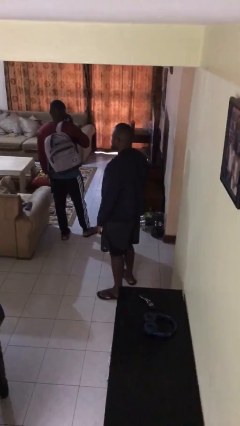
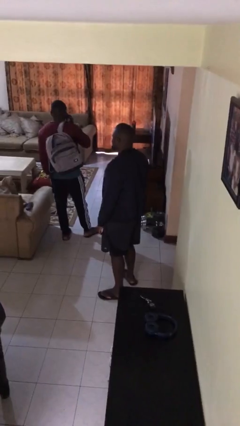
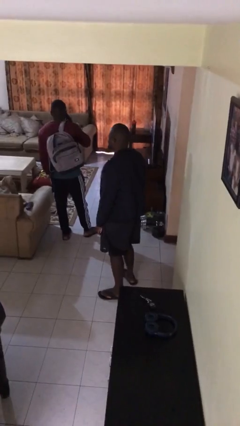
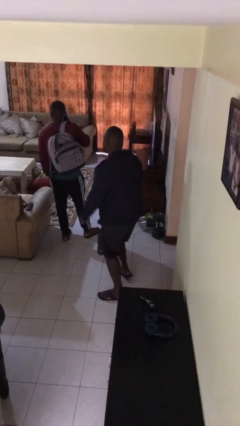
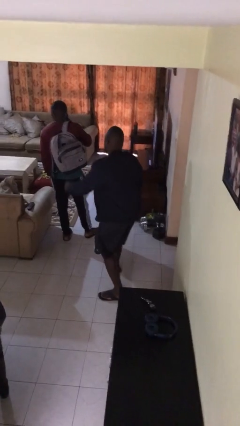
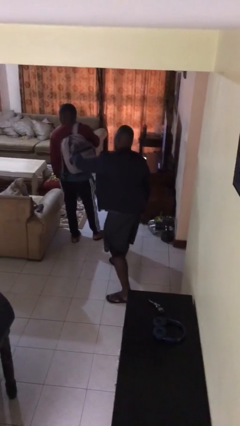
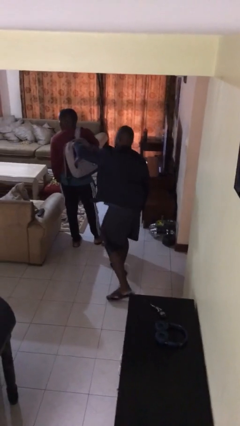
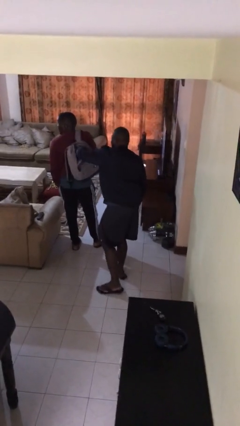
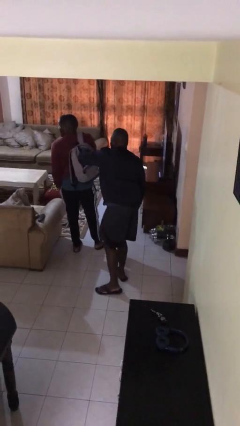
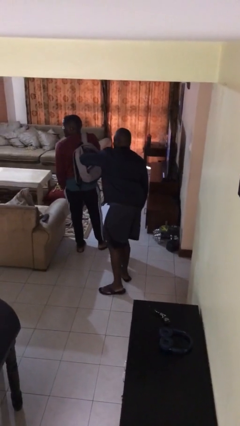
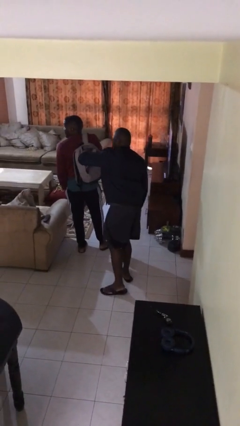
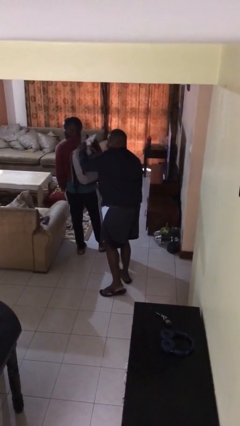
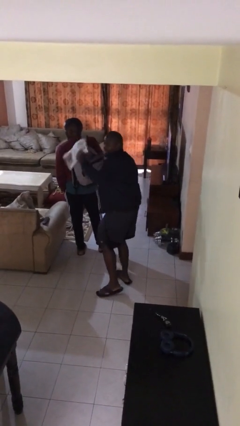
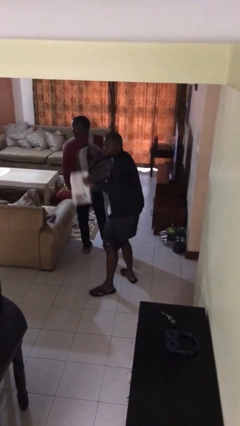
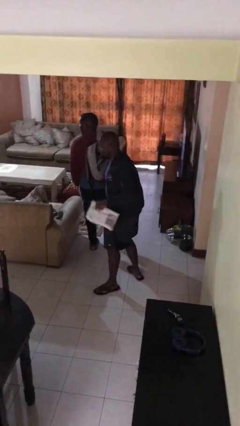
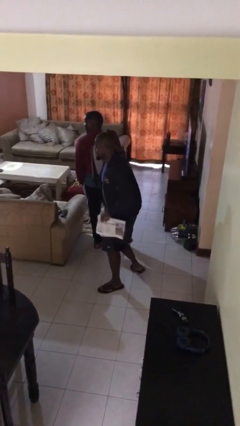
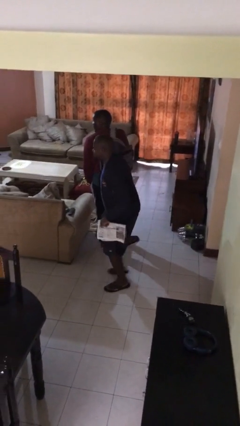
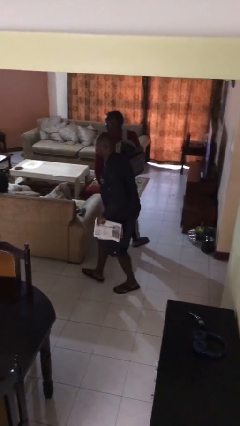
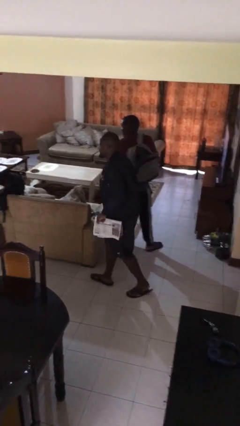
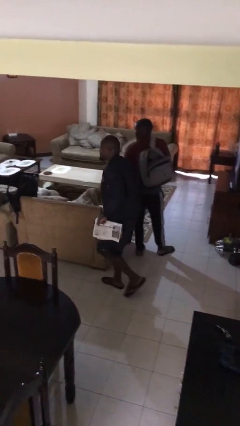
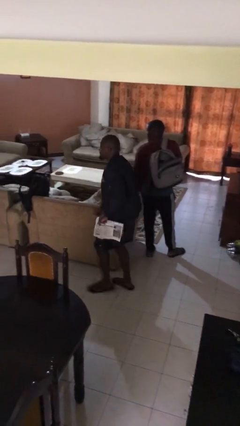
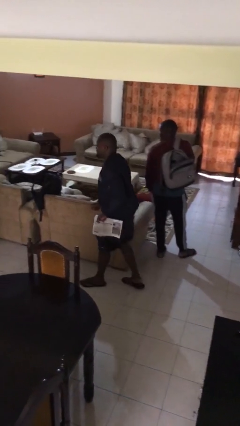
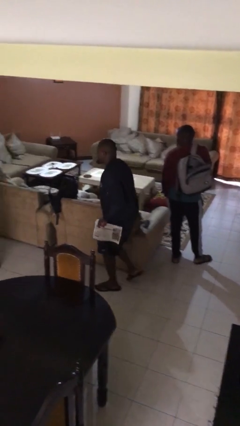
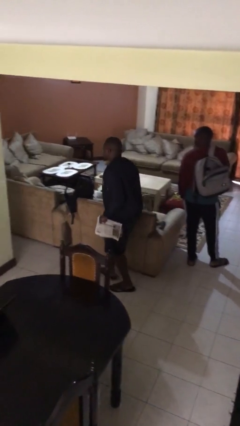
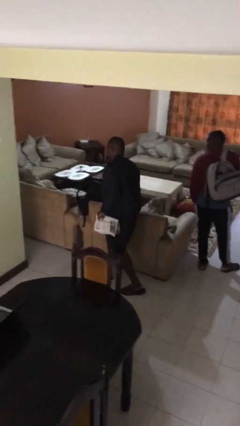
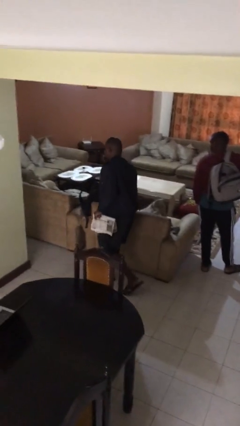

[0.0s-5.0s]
person steals object from person

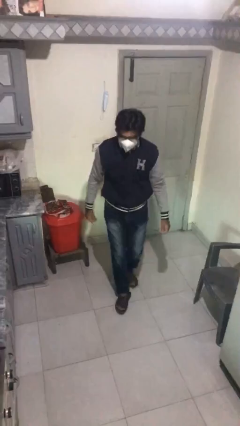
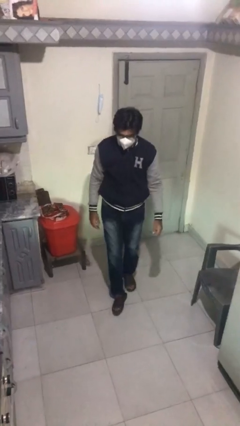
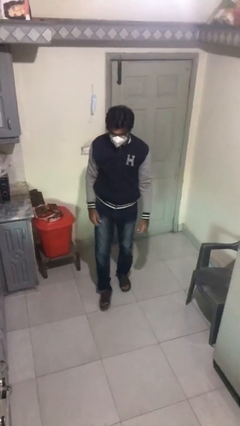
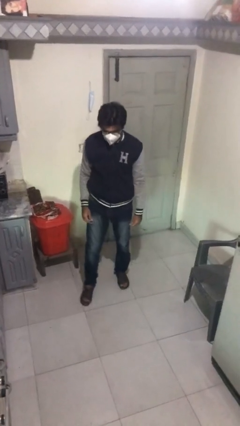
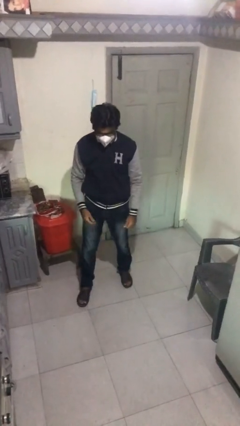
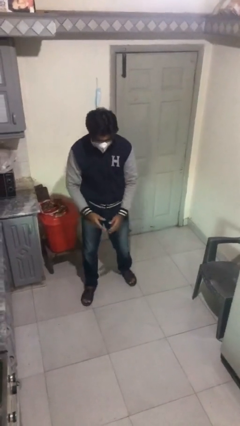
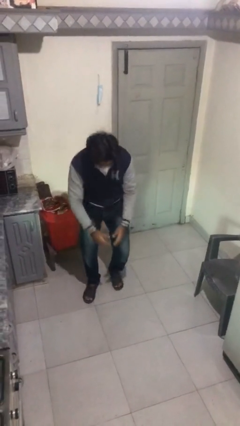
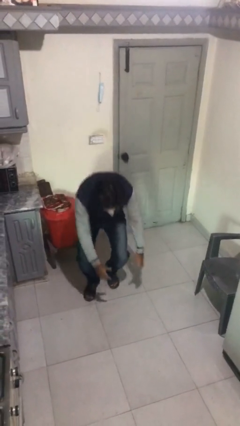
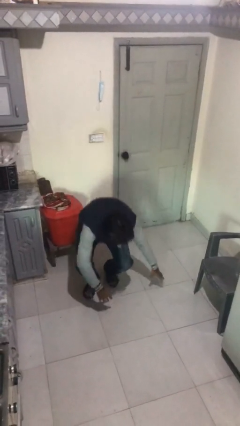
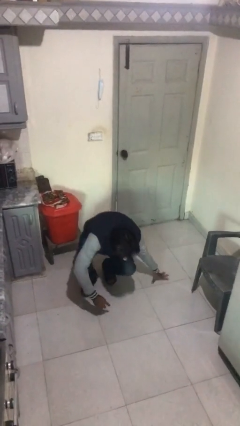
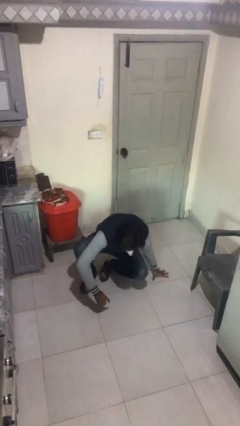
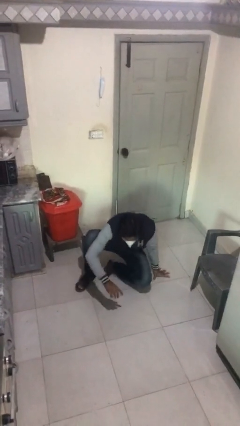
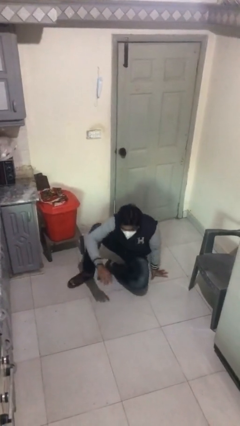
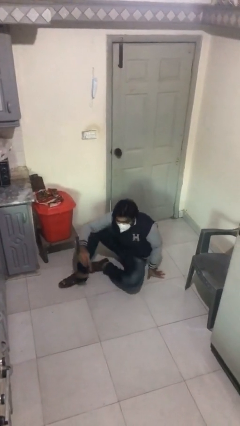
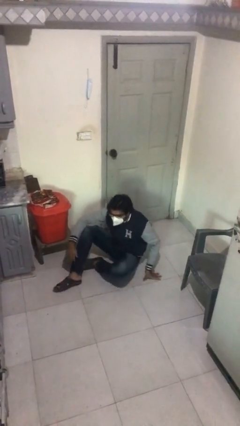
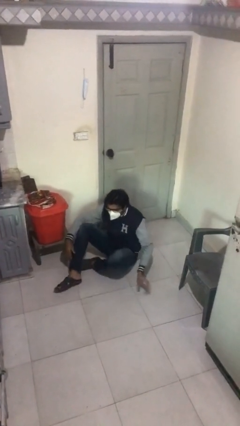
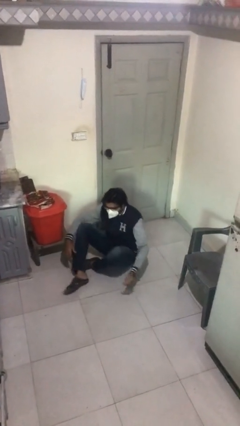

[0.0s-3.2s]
person sits down

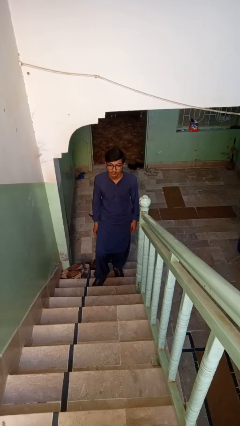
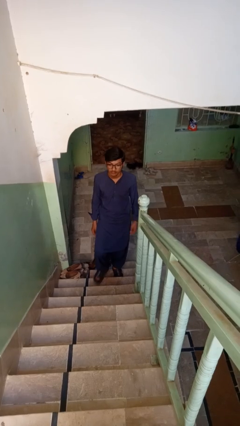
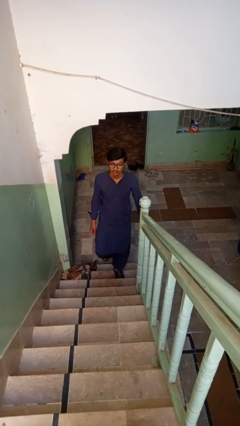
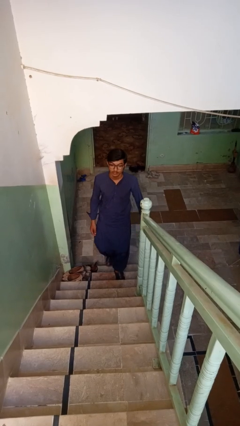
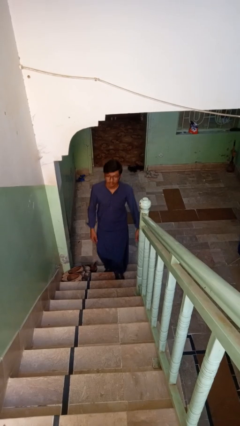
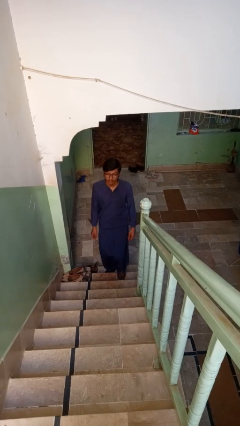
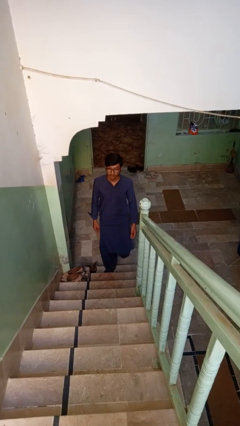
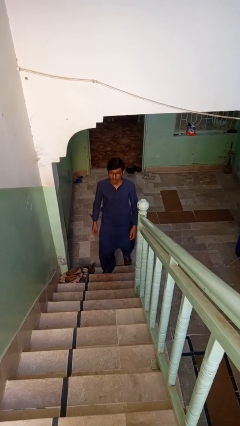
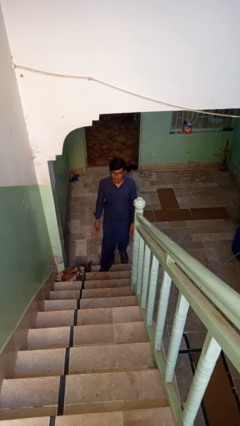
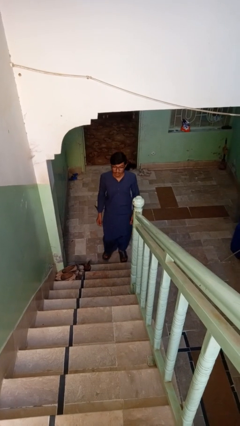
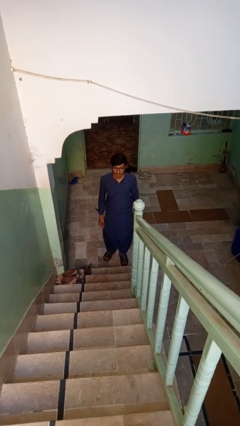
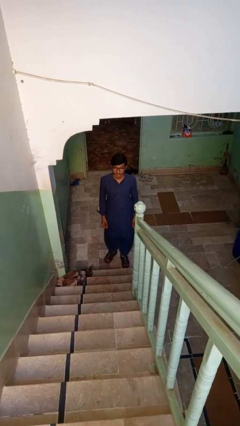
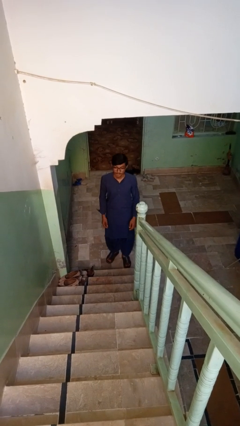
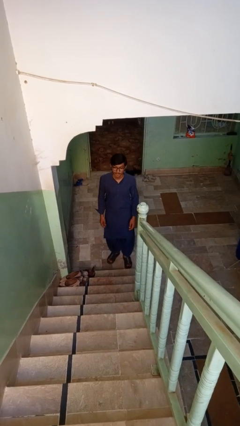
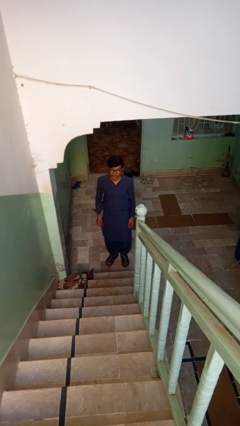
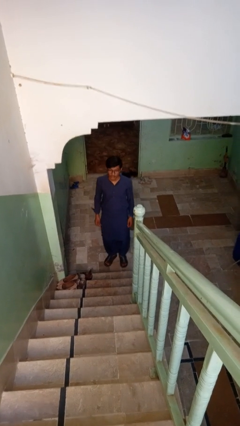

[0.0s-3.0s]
person climbs down stairs

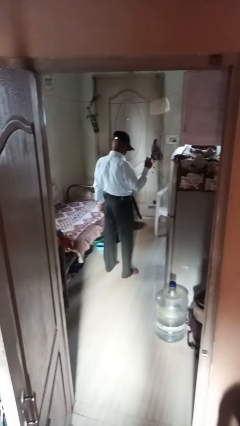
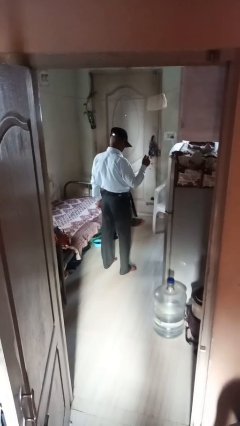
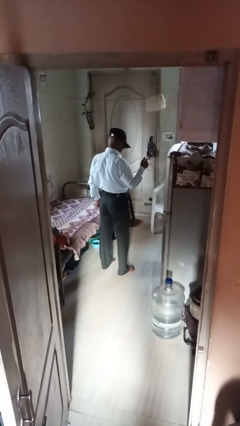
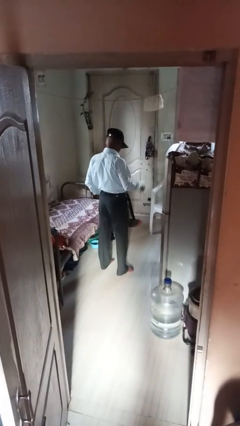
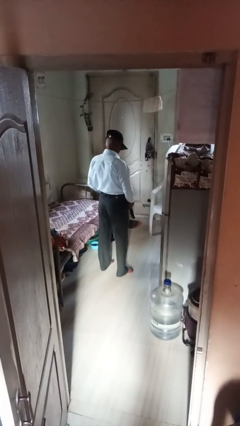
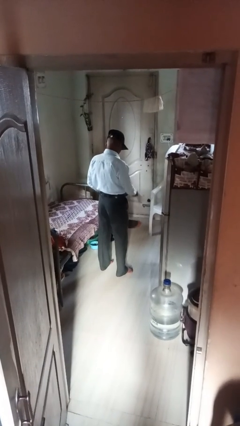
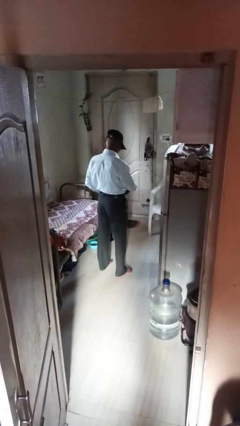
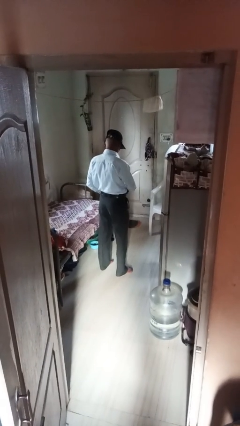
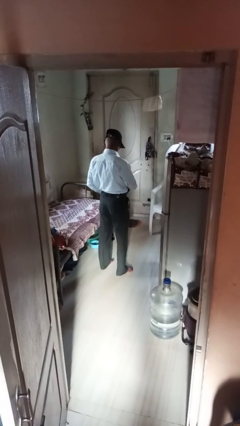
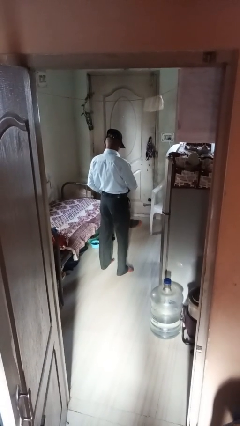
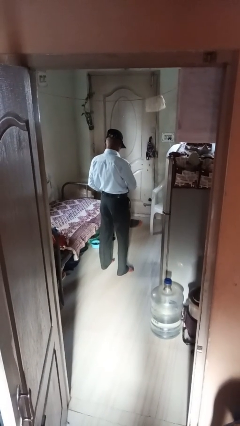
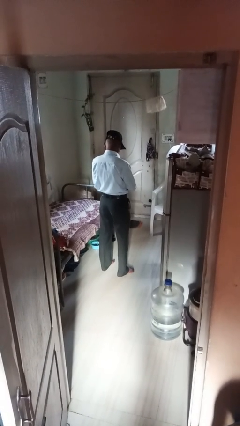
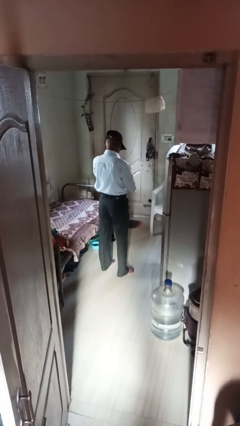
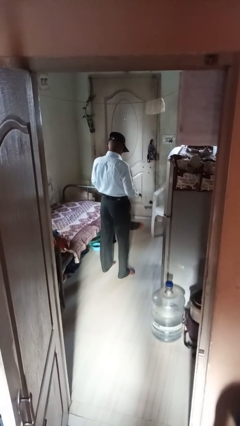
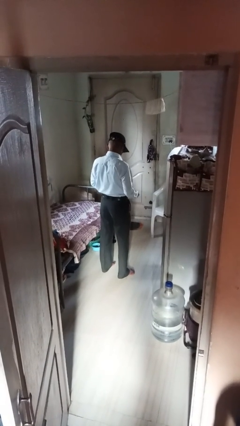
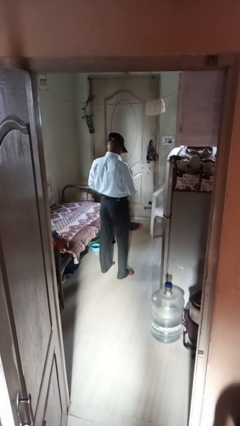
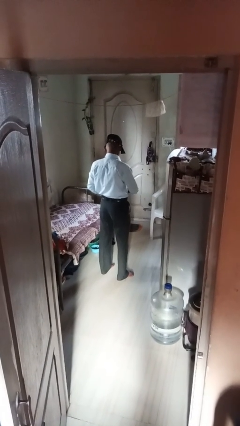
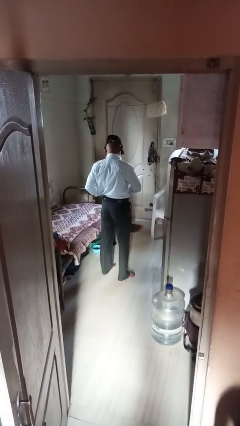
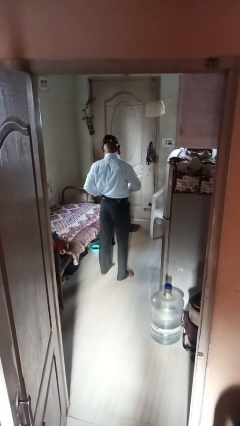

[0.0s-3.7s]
person puts on belt

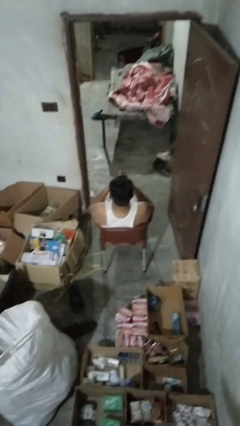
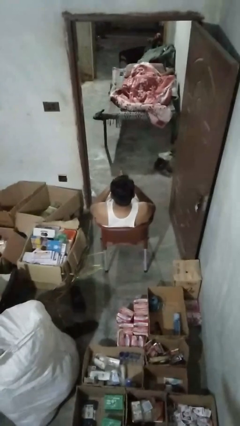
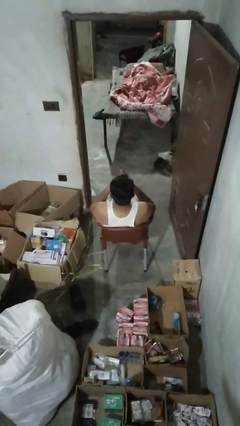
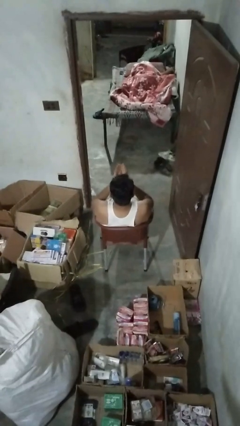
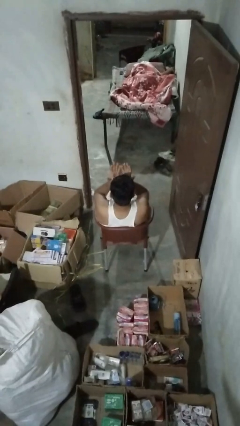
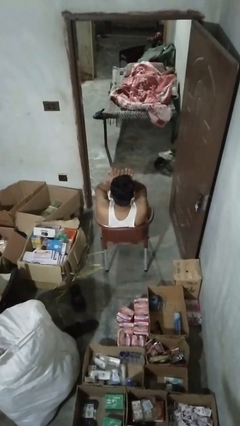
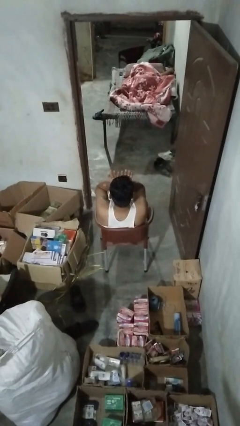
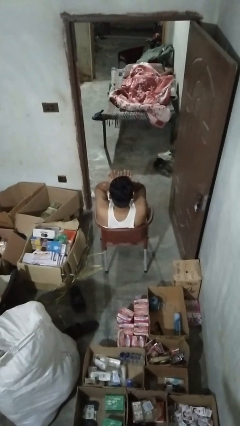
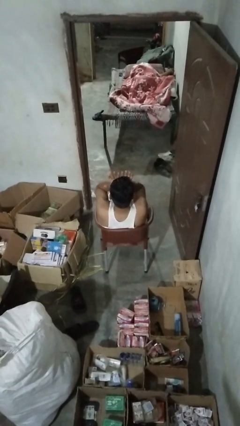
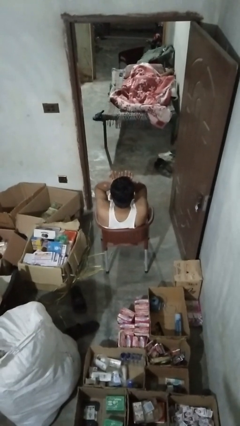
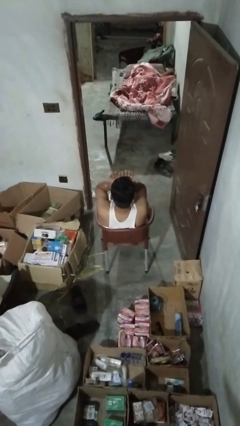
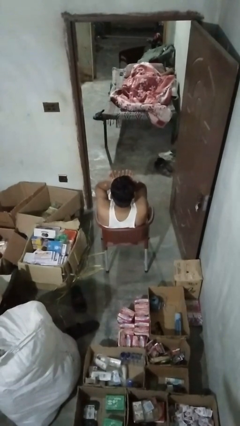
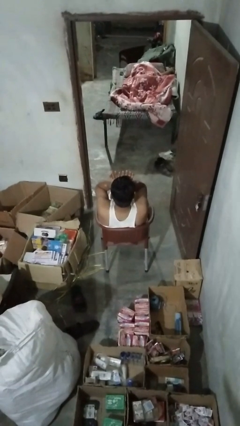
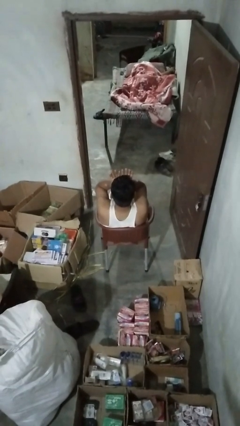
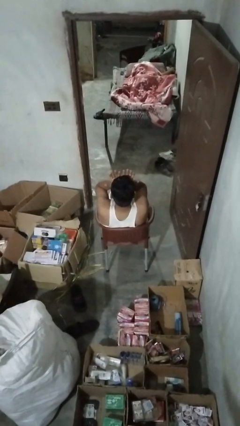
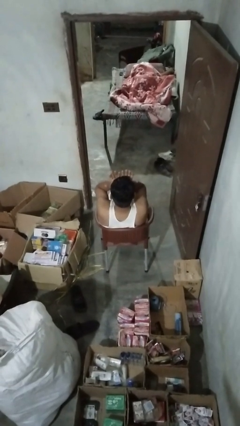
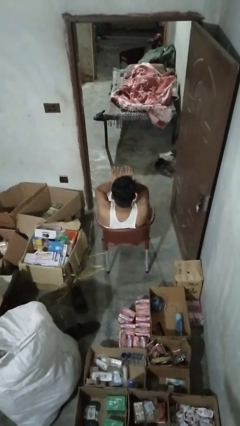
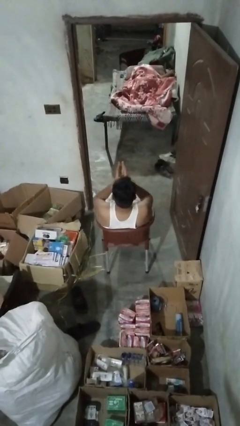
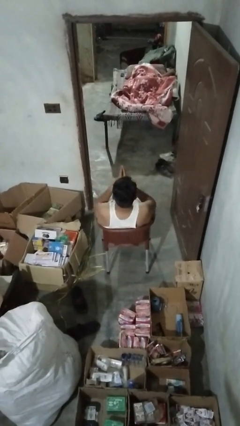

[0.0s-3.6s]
person rubs eyes
